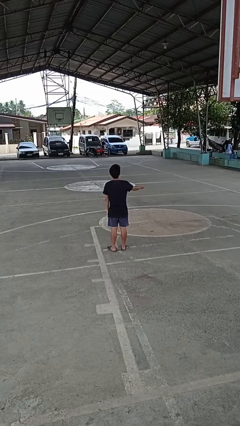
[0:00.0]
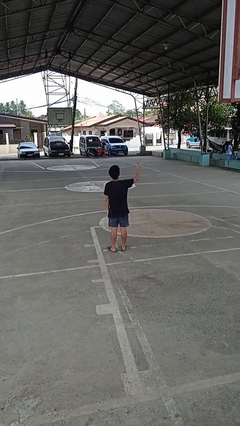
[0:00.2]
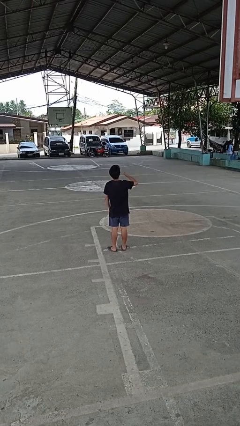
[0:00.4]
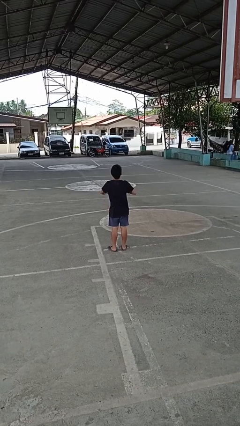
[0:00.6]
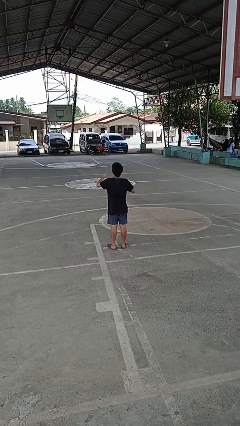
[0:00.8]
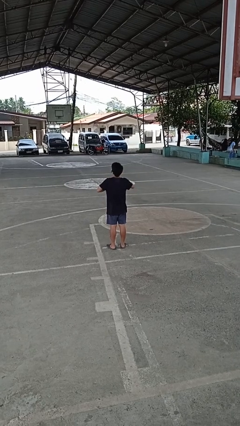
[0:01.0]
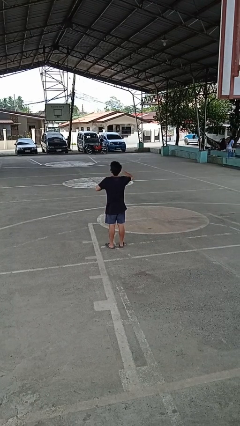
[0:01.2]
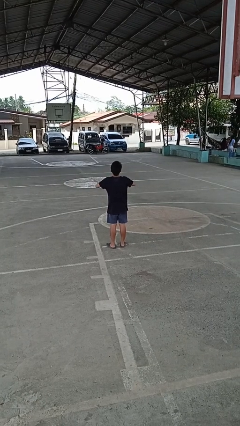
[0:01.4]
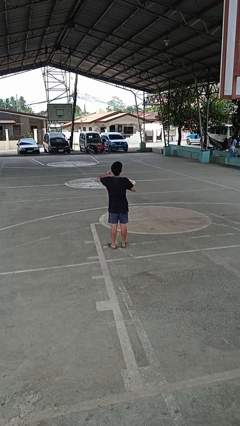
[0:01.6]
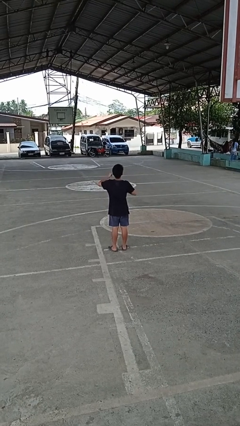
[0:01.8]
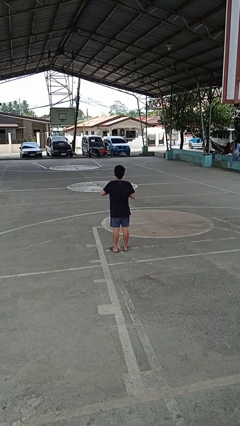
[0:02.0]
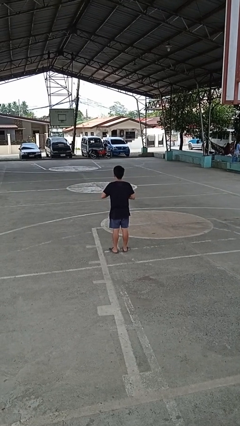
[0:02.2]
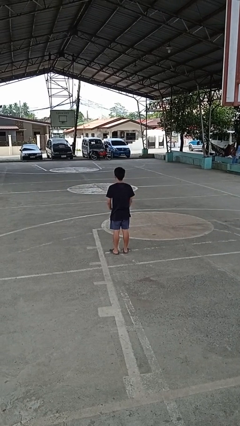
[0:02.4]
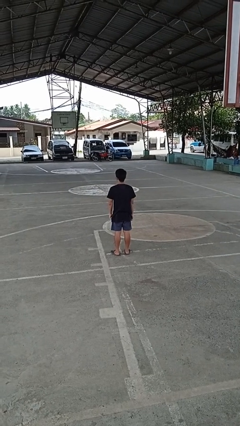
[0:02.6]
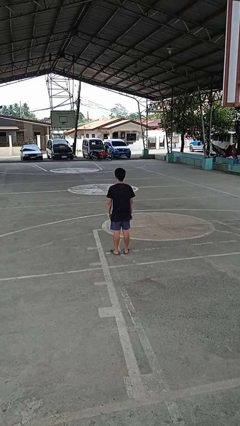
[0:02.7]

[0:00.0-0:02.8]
person drums on chest

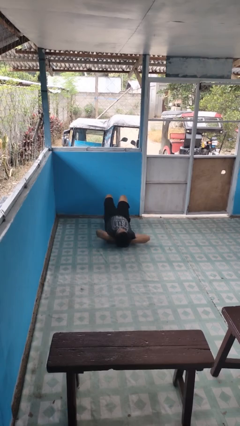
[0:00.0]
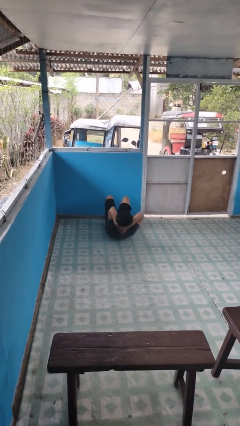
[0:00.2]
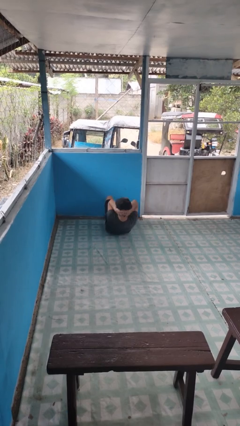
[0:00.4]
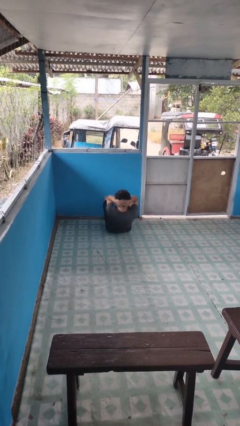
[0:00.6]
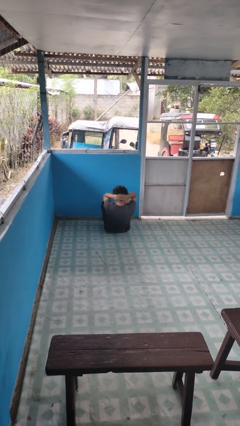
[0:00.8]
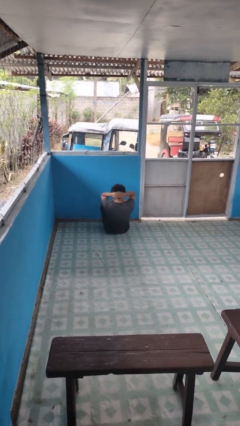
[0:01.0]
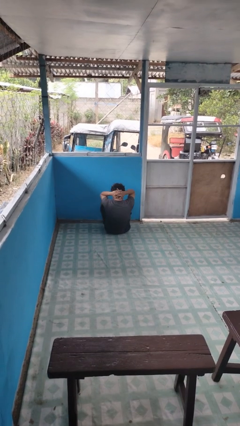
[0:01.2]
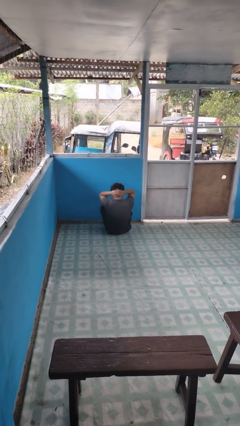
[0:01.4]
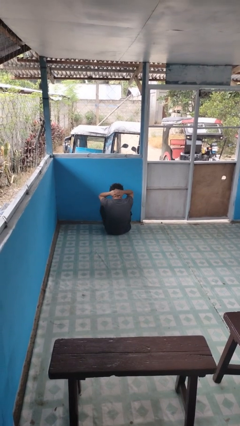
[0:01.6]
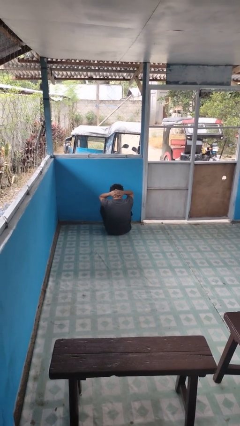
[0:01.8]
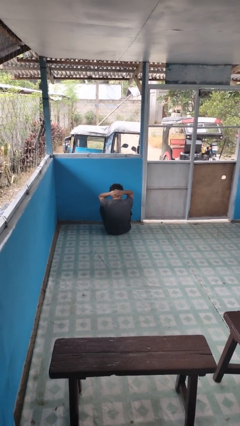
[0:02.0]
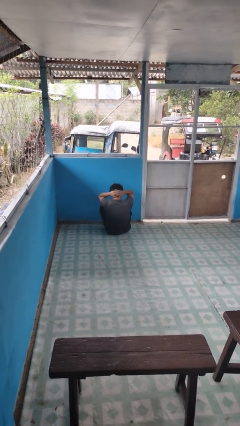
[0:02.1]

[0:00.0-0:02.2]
person exercises with situp

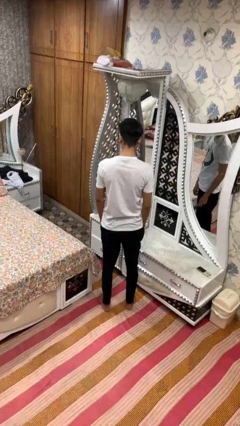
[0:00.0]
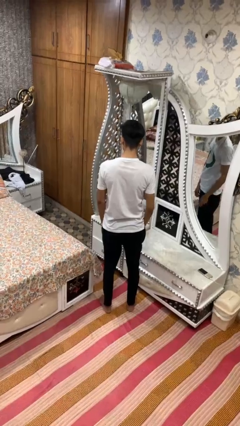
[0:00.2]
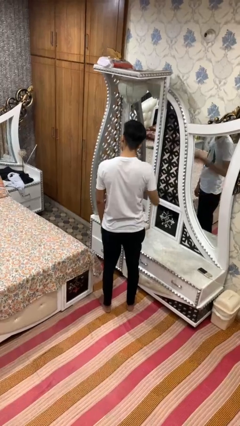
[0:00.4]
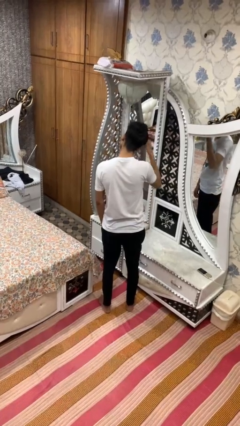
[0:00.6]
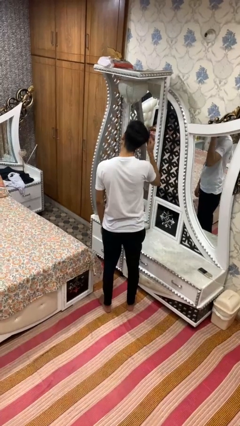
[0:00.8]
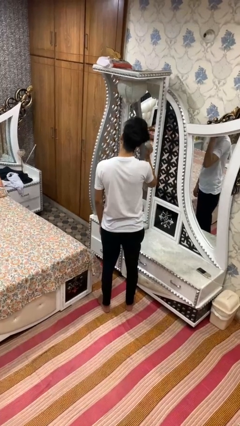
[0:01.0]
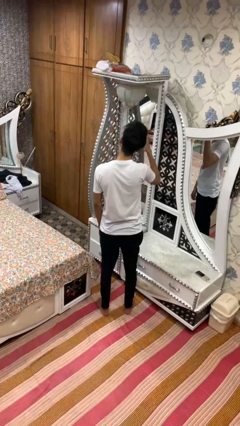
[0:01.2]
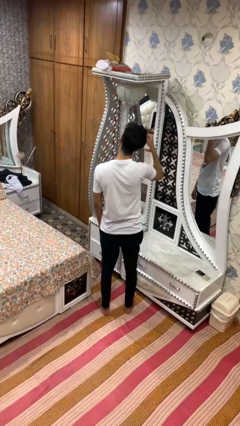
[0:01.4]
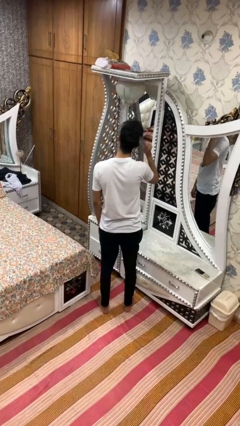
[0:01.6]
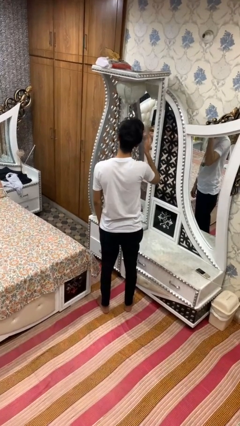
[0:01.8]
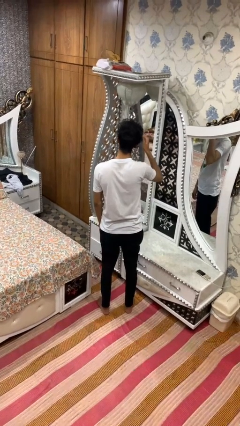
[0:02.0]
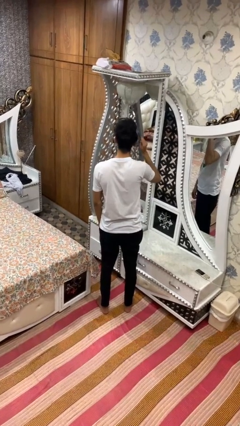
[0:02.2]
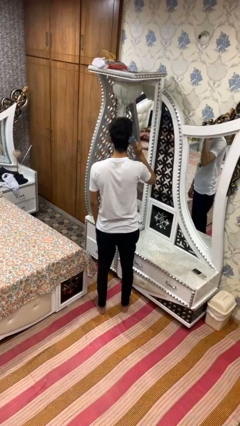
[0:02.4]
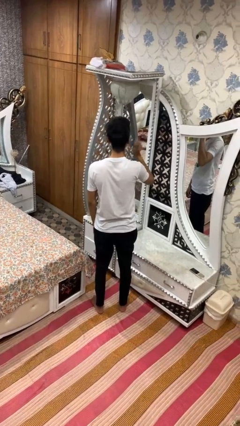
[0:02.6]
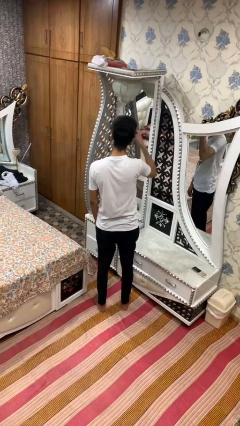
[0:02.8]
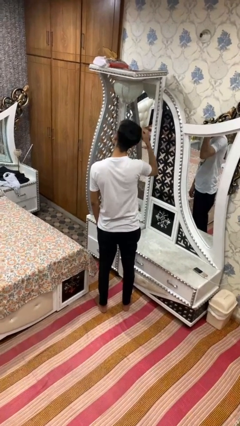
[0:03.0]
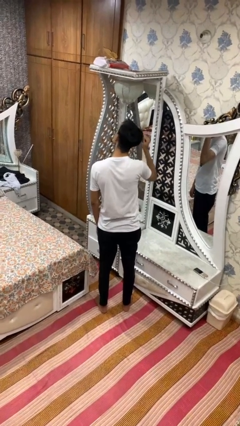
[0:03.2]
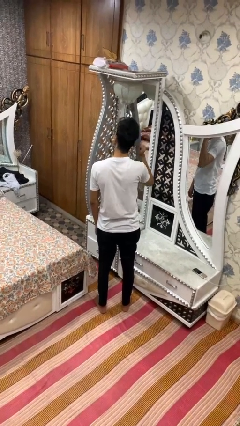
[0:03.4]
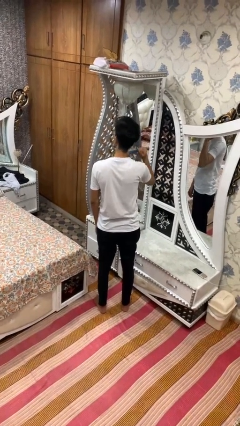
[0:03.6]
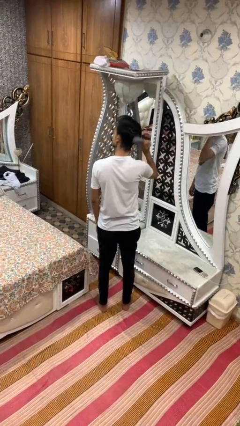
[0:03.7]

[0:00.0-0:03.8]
person brushes hair

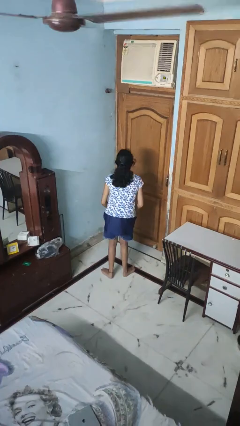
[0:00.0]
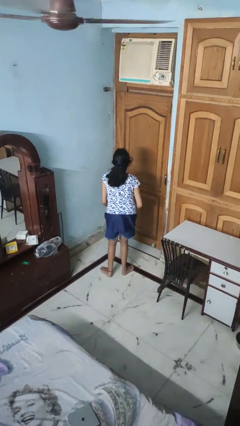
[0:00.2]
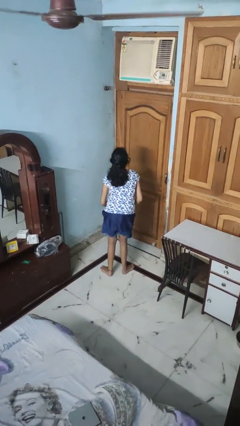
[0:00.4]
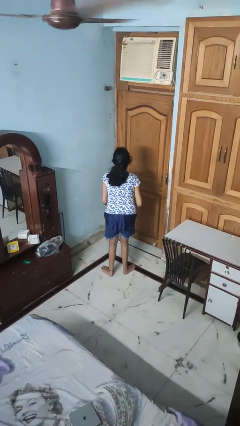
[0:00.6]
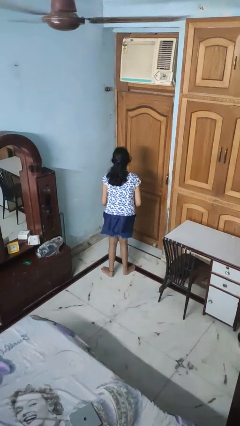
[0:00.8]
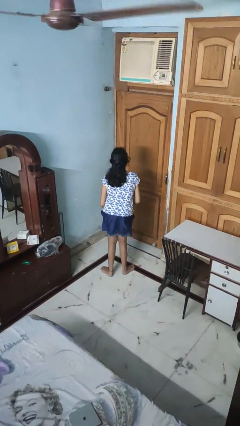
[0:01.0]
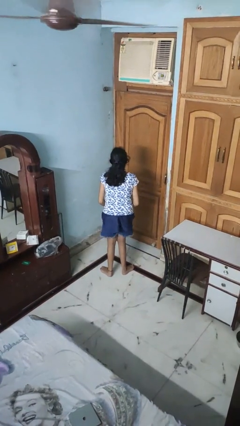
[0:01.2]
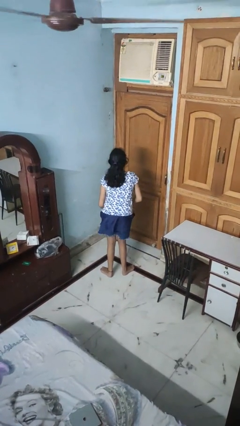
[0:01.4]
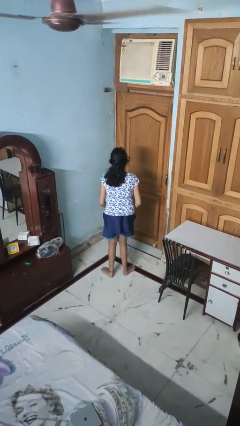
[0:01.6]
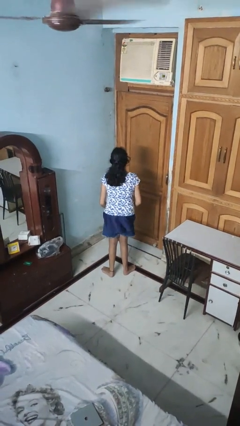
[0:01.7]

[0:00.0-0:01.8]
person wiggles hips

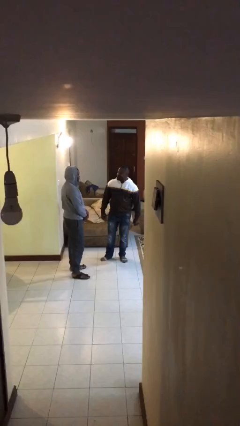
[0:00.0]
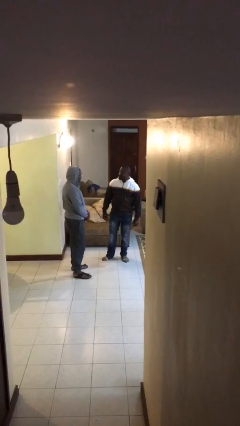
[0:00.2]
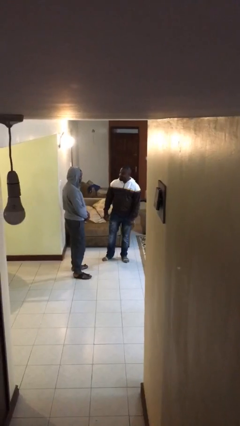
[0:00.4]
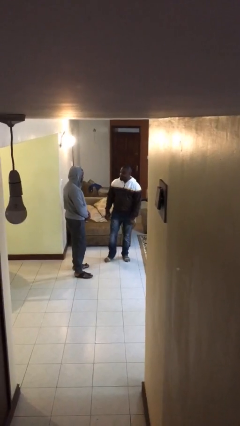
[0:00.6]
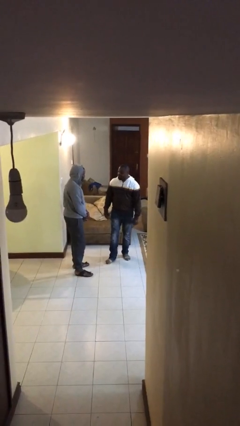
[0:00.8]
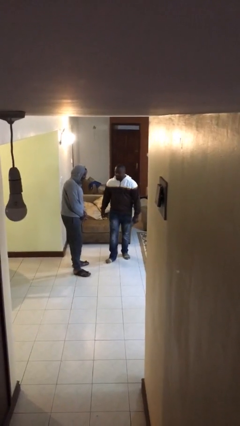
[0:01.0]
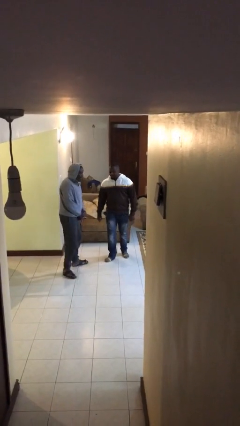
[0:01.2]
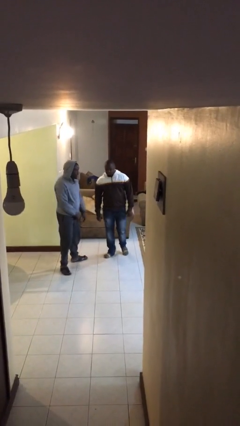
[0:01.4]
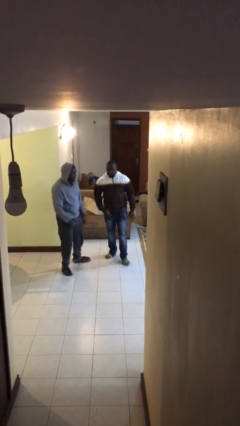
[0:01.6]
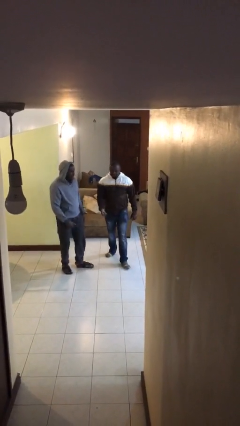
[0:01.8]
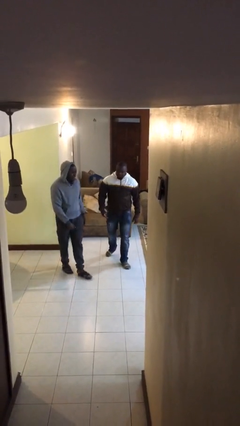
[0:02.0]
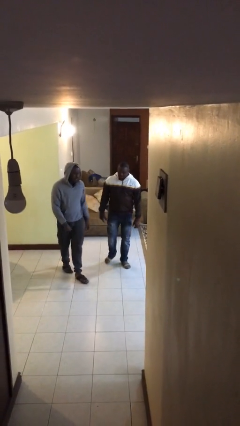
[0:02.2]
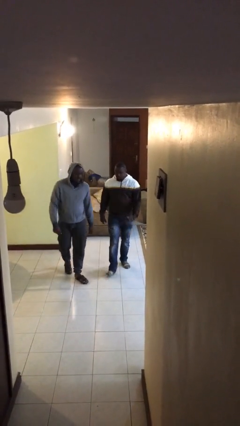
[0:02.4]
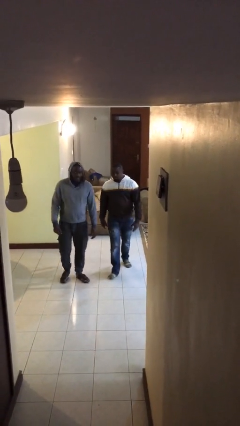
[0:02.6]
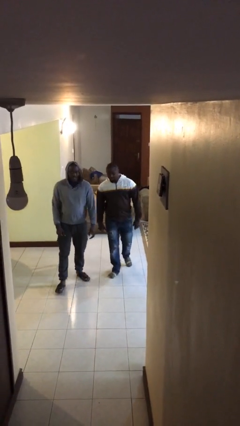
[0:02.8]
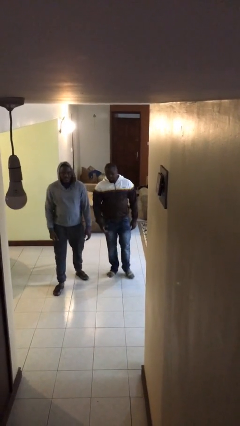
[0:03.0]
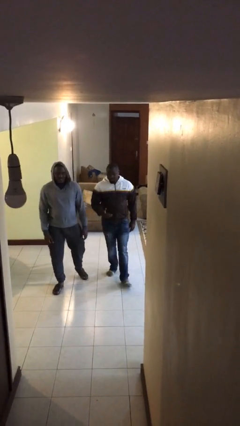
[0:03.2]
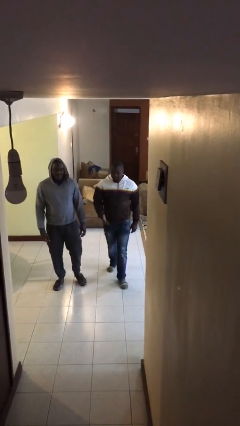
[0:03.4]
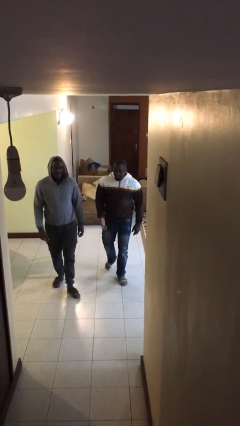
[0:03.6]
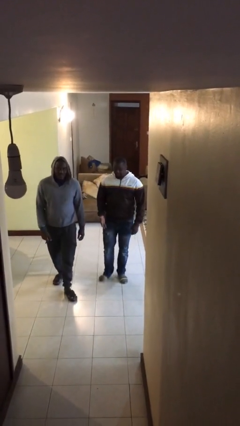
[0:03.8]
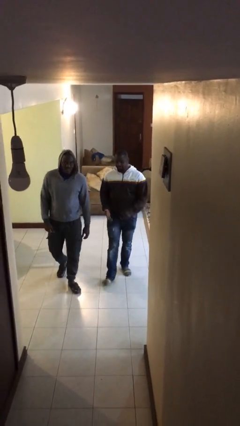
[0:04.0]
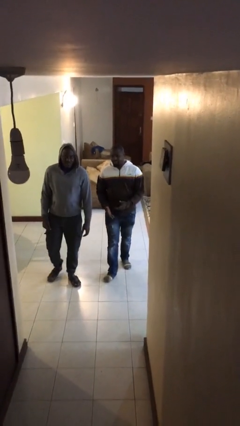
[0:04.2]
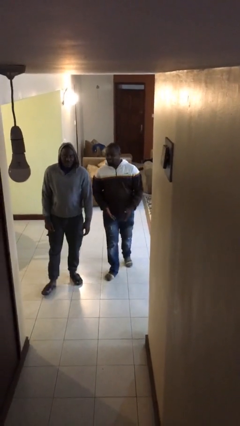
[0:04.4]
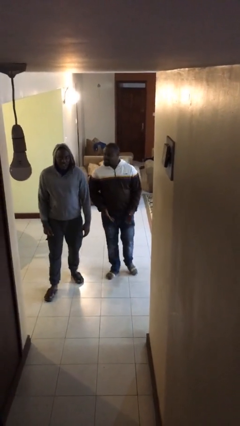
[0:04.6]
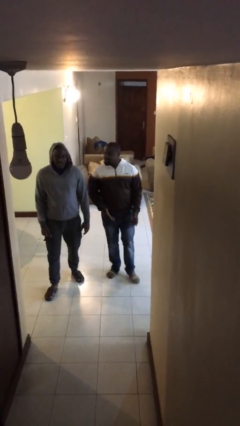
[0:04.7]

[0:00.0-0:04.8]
person talks to person

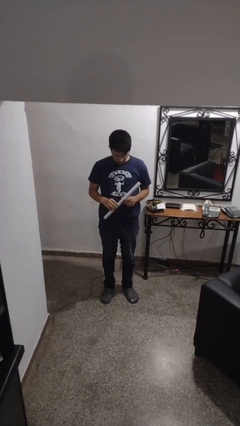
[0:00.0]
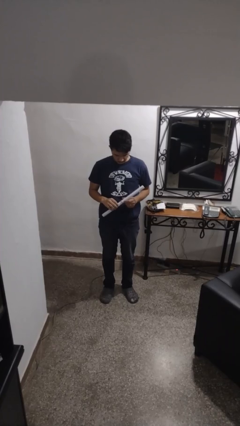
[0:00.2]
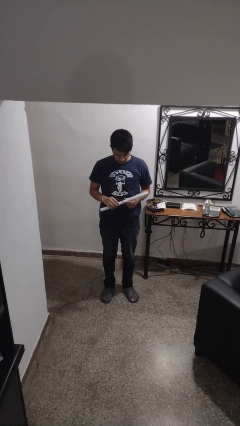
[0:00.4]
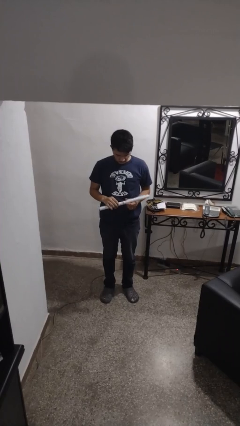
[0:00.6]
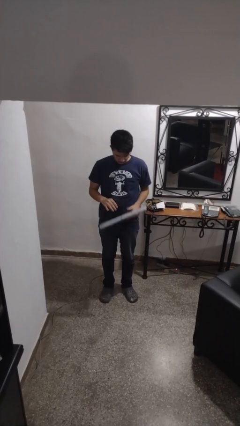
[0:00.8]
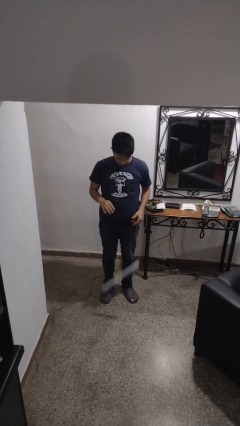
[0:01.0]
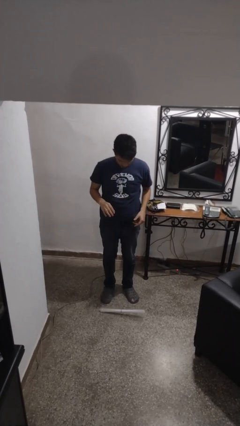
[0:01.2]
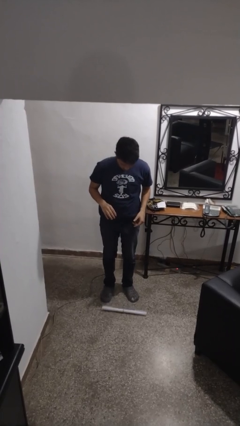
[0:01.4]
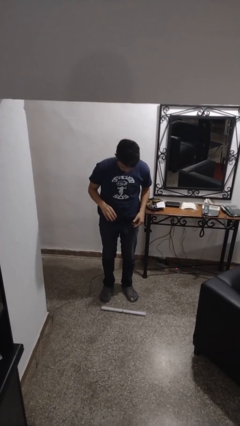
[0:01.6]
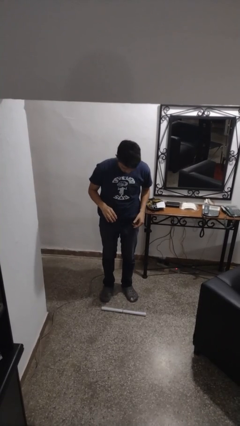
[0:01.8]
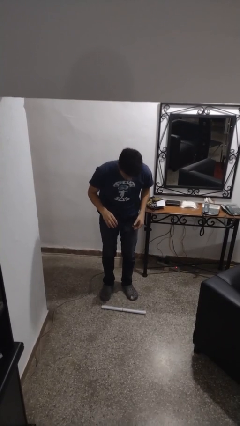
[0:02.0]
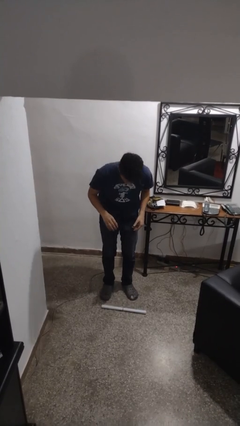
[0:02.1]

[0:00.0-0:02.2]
person drops object
